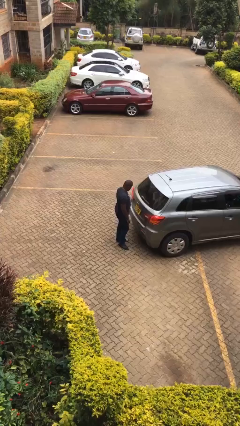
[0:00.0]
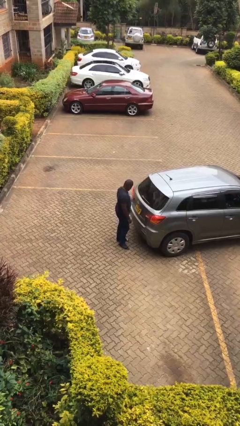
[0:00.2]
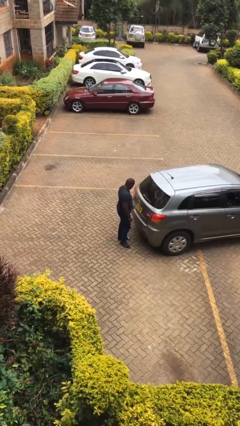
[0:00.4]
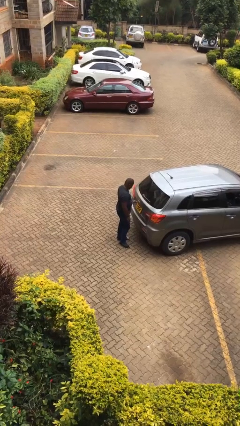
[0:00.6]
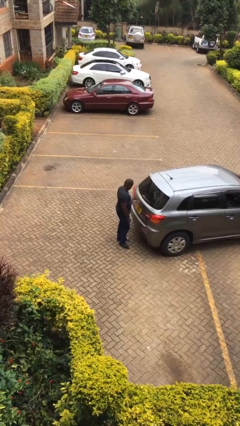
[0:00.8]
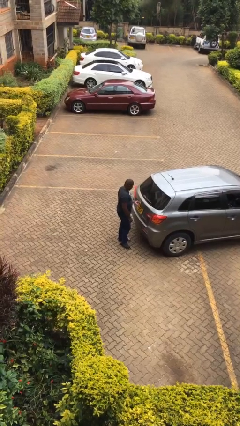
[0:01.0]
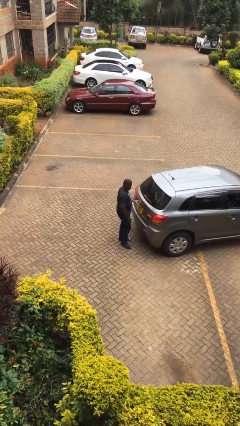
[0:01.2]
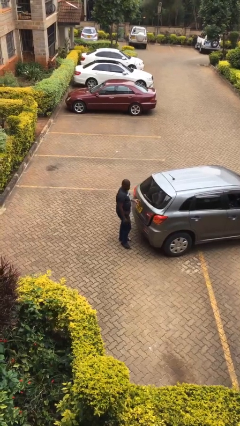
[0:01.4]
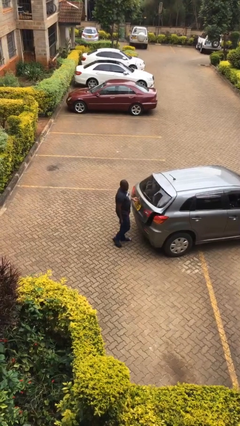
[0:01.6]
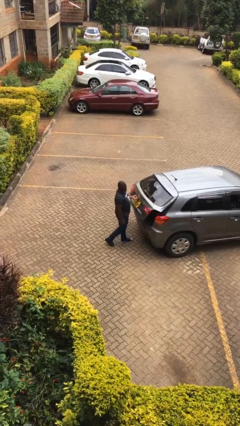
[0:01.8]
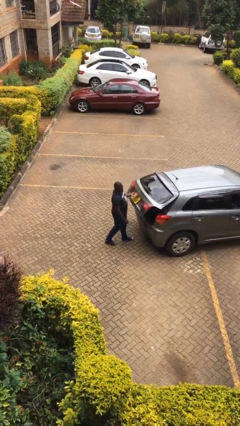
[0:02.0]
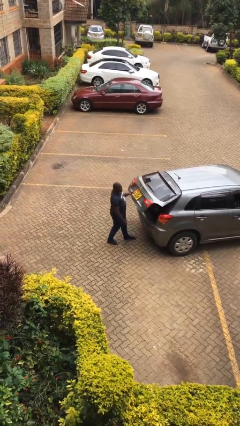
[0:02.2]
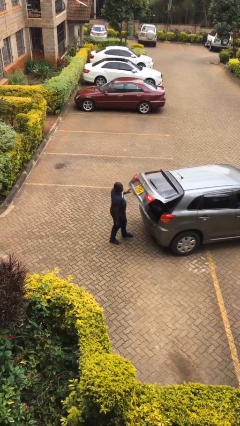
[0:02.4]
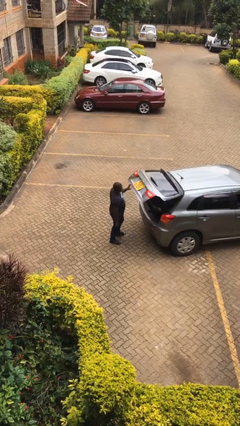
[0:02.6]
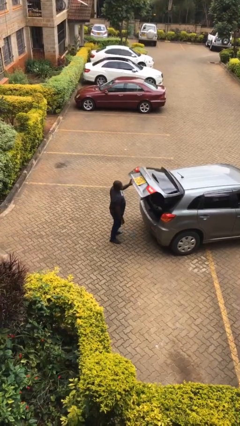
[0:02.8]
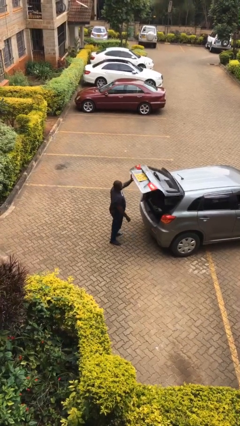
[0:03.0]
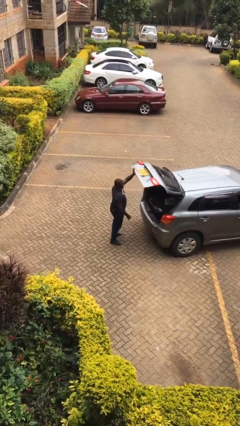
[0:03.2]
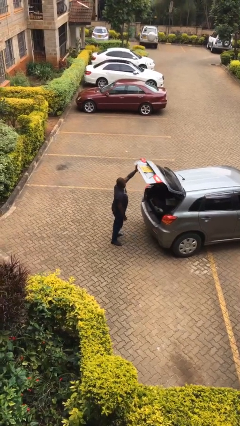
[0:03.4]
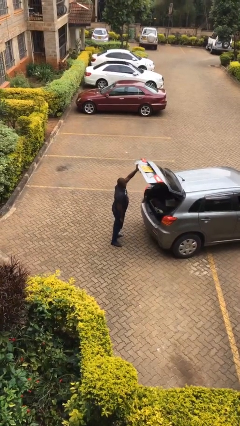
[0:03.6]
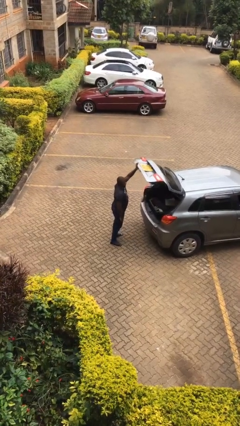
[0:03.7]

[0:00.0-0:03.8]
person opens car trunk

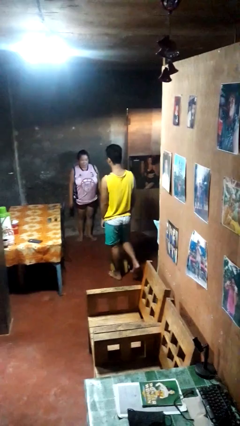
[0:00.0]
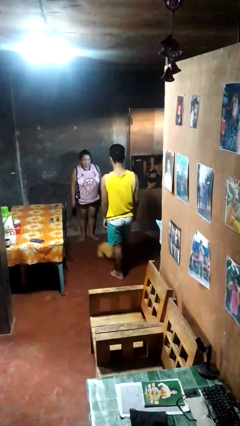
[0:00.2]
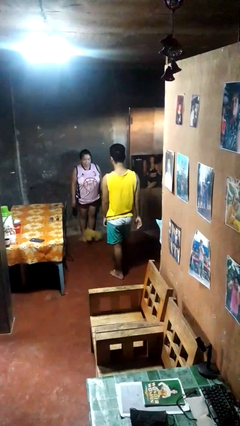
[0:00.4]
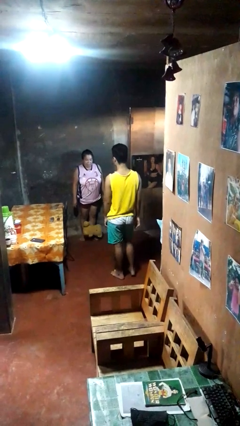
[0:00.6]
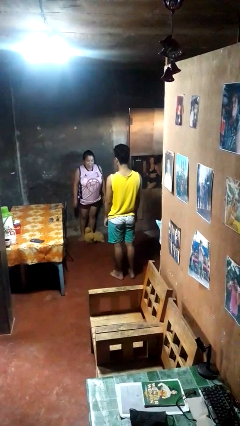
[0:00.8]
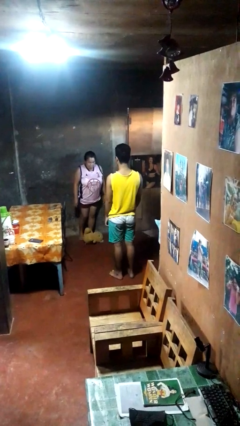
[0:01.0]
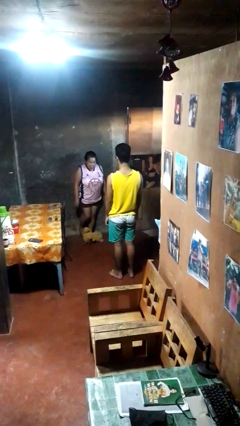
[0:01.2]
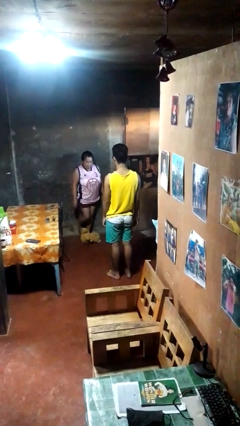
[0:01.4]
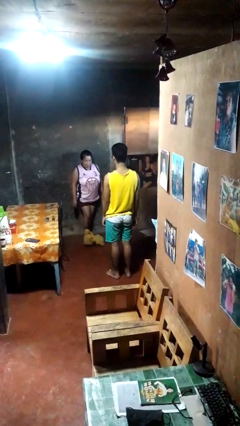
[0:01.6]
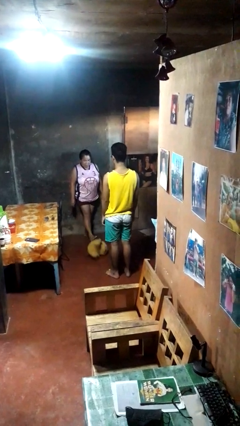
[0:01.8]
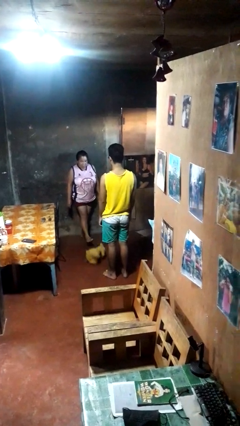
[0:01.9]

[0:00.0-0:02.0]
person kicks object to person

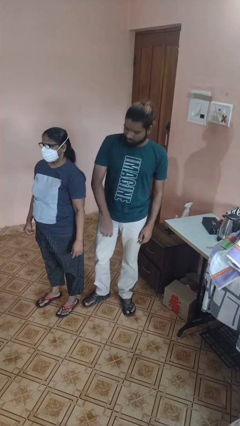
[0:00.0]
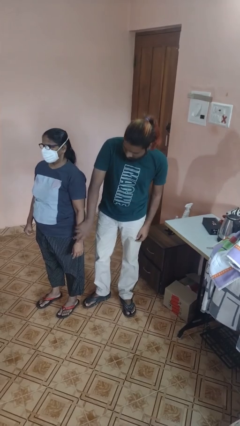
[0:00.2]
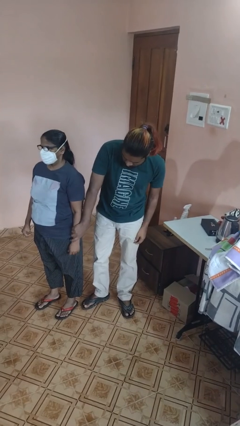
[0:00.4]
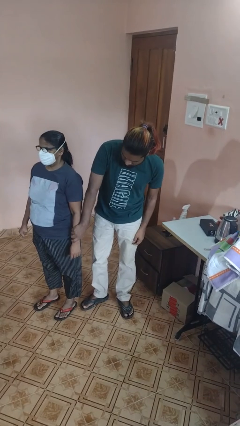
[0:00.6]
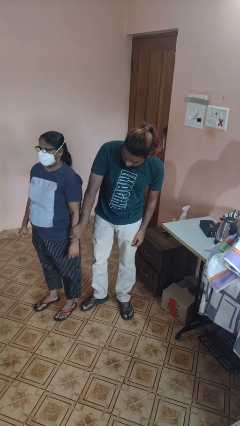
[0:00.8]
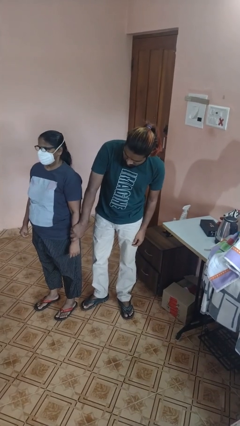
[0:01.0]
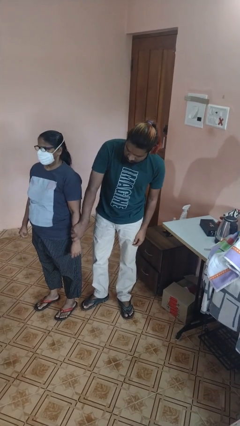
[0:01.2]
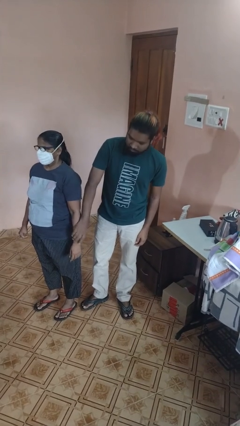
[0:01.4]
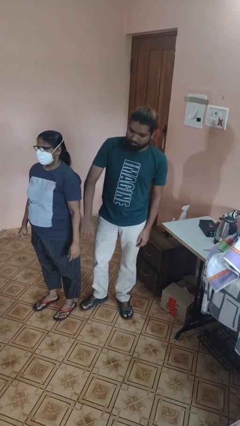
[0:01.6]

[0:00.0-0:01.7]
person grabs person by forearm

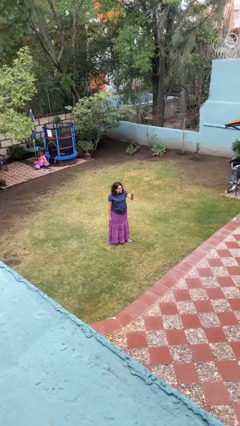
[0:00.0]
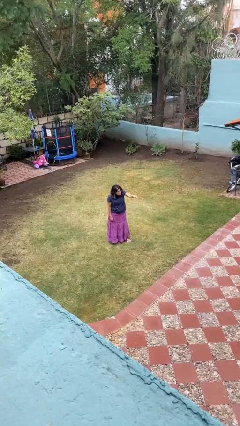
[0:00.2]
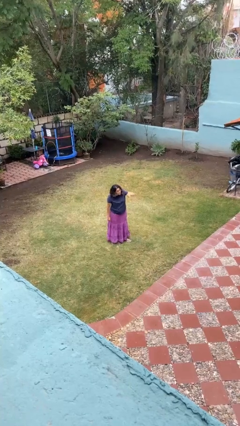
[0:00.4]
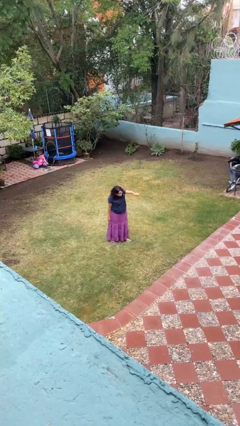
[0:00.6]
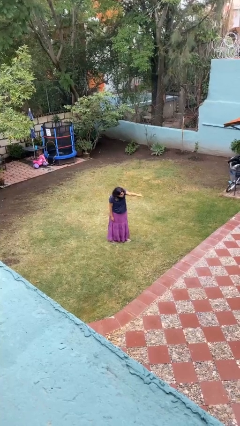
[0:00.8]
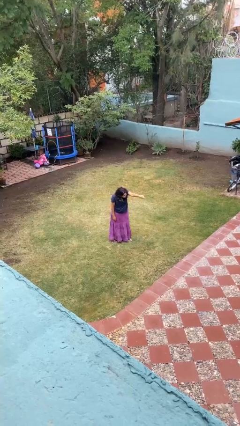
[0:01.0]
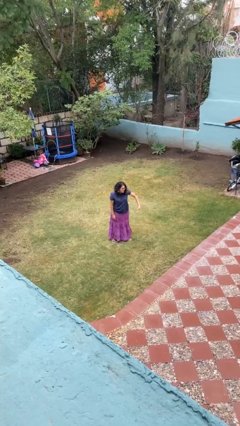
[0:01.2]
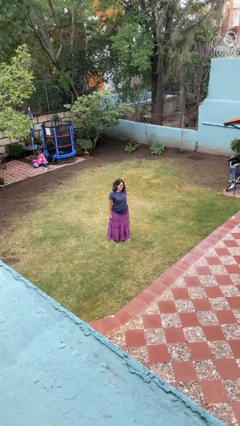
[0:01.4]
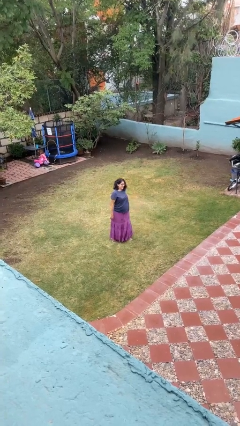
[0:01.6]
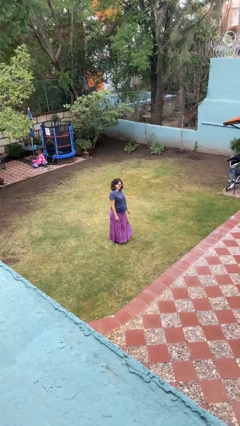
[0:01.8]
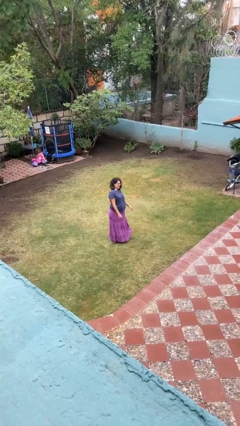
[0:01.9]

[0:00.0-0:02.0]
person points at person

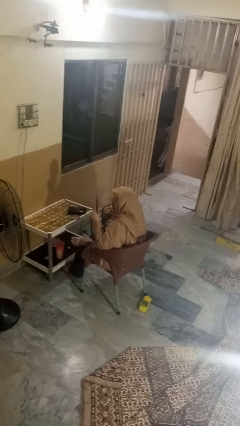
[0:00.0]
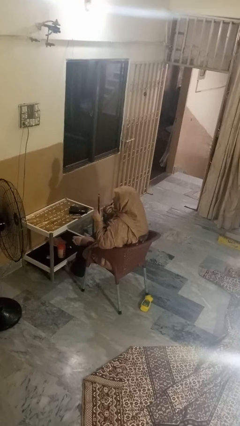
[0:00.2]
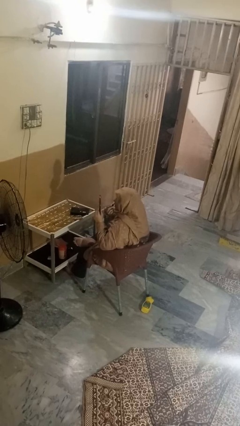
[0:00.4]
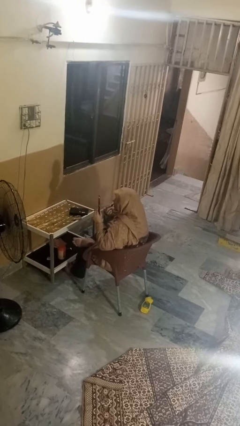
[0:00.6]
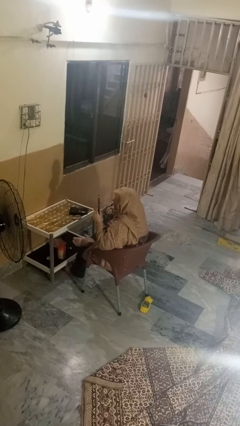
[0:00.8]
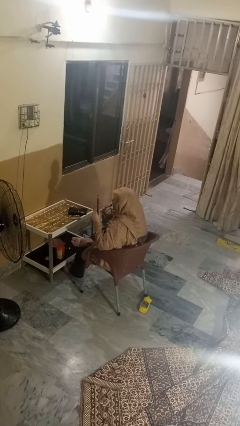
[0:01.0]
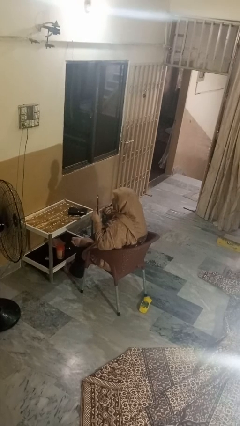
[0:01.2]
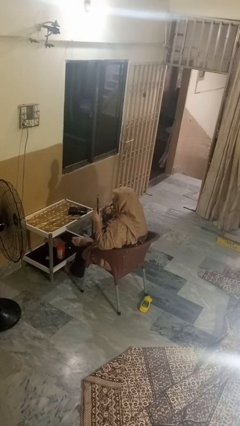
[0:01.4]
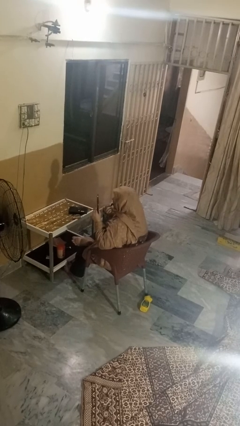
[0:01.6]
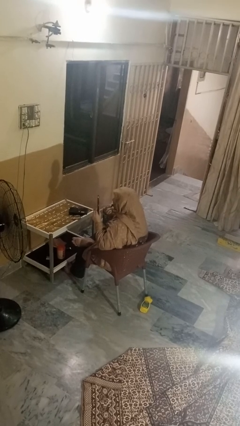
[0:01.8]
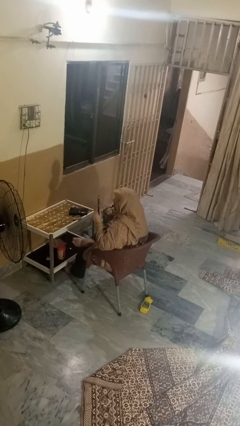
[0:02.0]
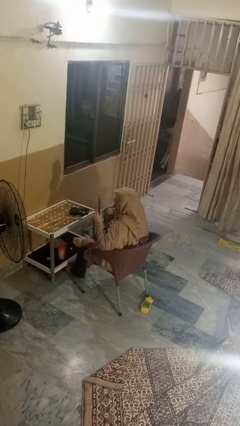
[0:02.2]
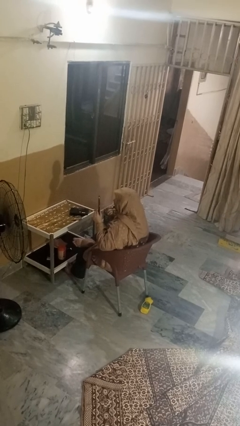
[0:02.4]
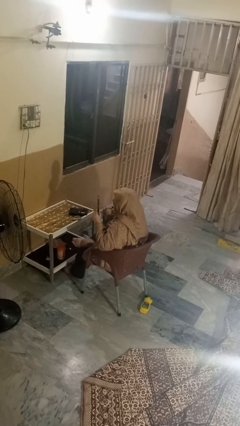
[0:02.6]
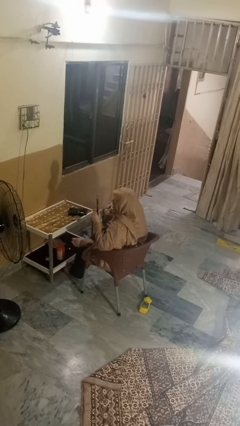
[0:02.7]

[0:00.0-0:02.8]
person applies lip makeup

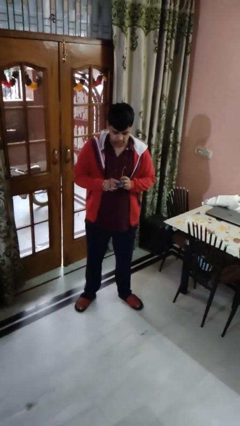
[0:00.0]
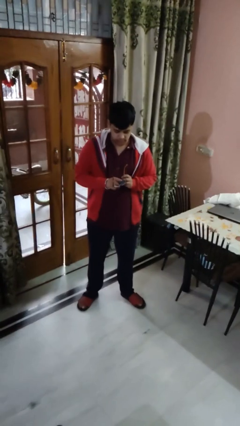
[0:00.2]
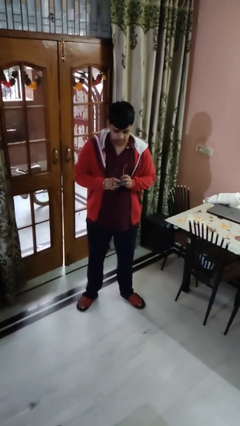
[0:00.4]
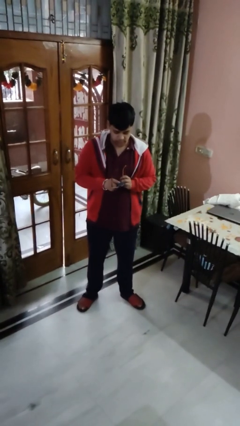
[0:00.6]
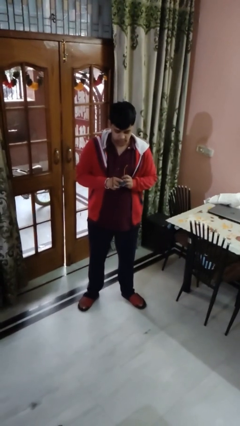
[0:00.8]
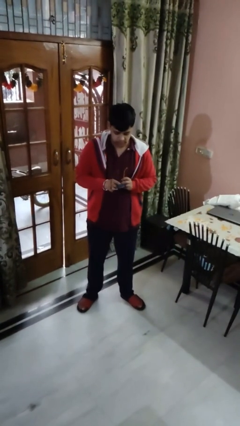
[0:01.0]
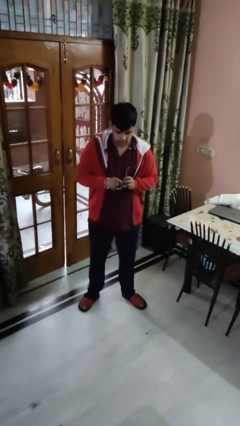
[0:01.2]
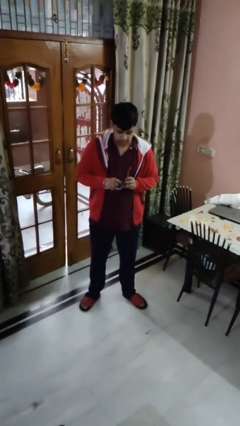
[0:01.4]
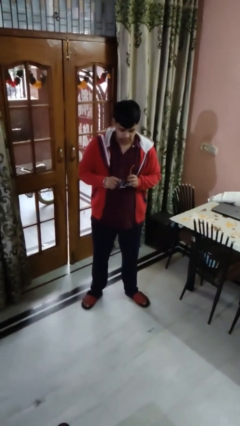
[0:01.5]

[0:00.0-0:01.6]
person cleans eyeglasses

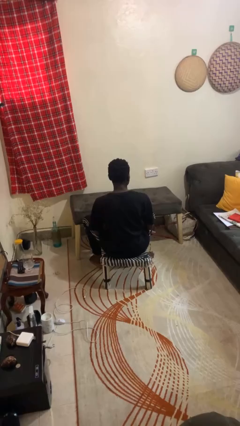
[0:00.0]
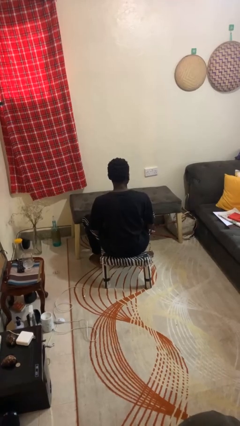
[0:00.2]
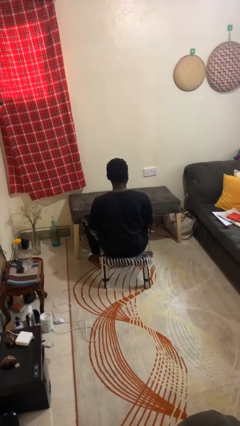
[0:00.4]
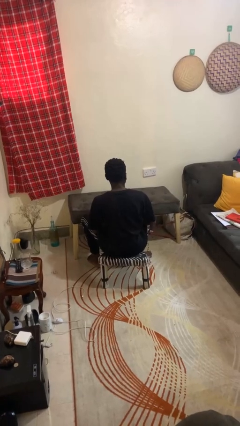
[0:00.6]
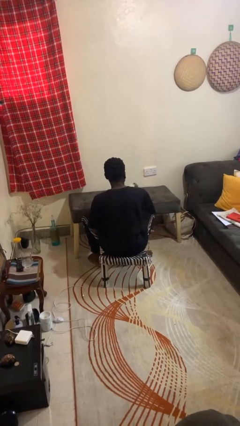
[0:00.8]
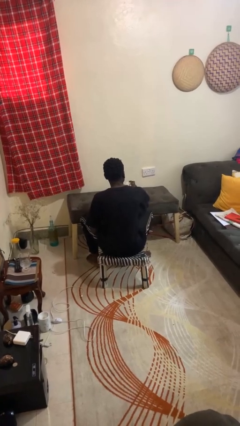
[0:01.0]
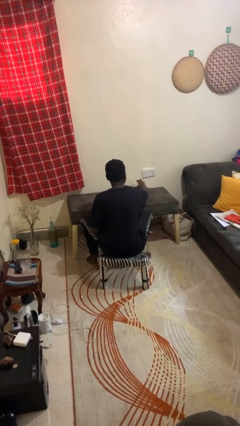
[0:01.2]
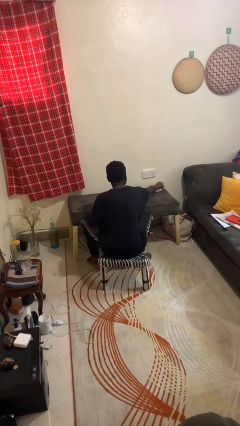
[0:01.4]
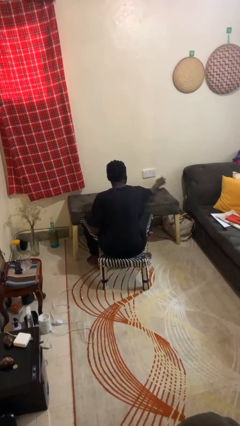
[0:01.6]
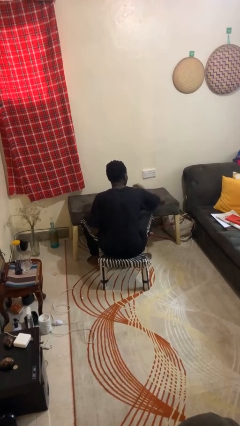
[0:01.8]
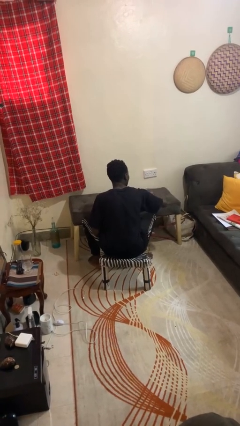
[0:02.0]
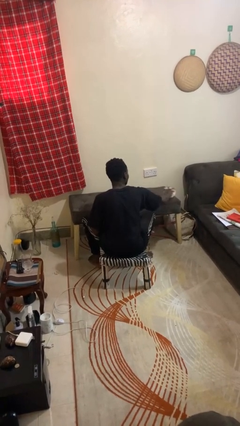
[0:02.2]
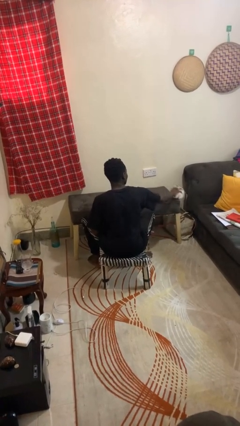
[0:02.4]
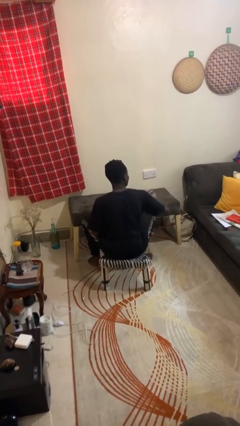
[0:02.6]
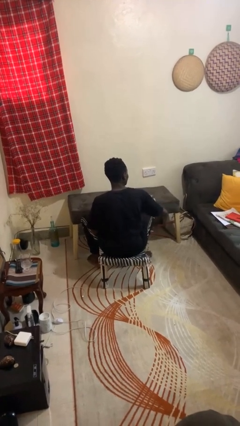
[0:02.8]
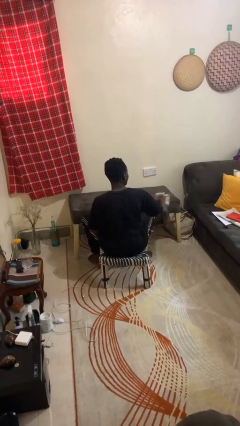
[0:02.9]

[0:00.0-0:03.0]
person cleans table with rag

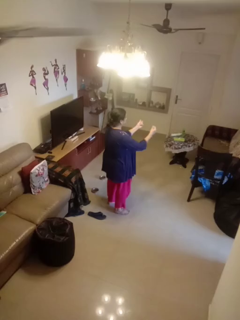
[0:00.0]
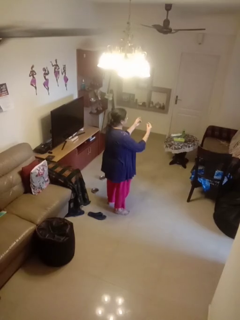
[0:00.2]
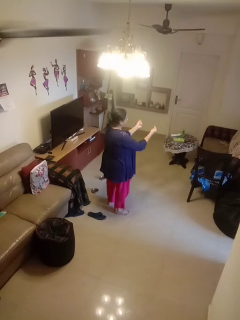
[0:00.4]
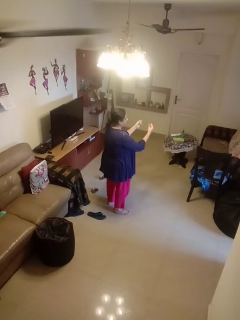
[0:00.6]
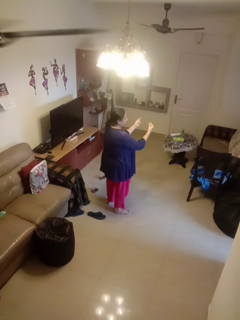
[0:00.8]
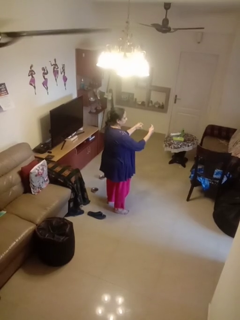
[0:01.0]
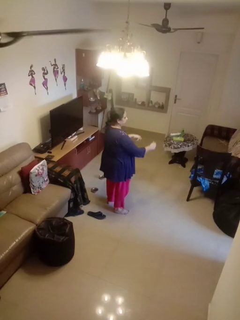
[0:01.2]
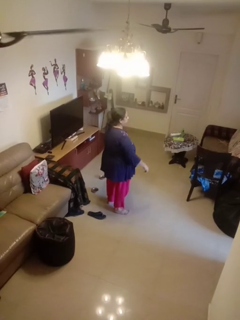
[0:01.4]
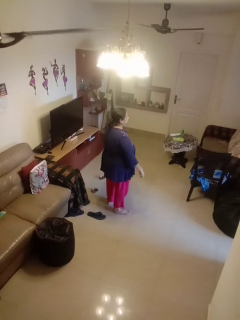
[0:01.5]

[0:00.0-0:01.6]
person snaps fingers
